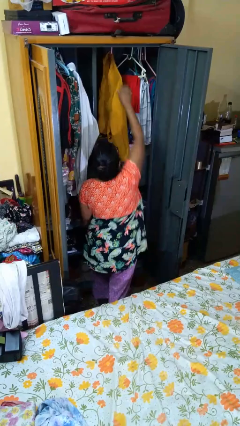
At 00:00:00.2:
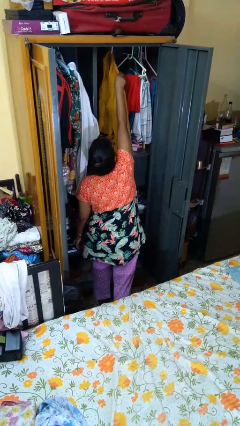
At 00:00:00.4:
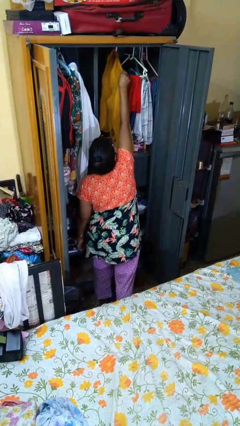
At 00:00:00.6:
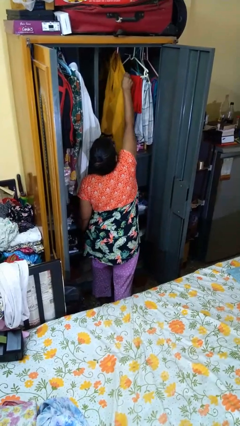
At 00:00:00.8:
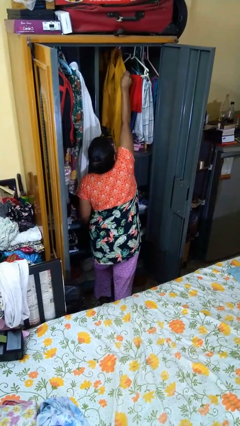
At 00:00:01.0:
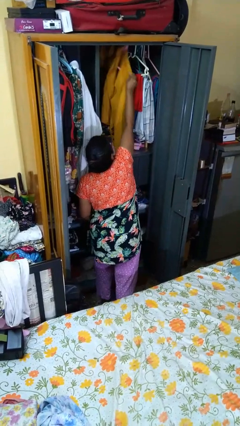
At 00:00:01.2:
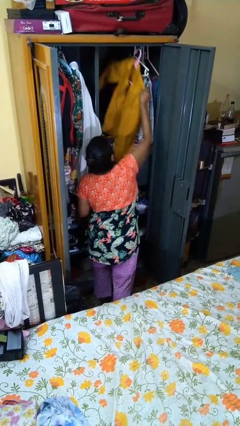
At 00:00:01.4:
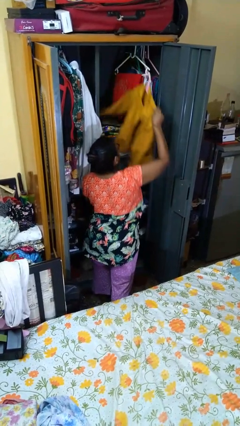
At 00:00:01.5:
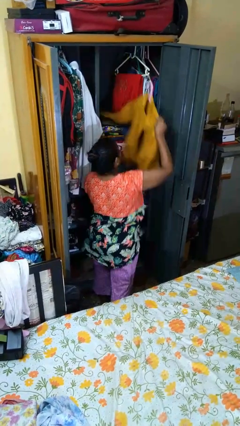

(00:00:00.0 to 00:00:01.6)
person takes clothes from closet

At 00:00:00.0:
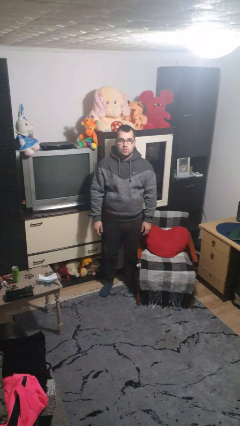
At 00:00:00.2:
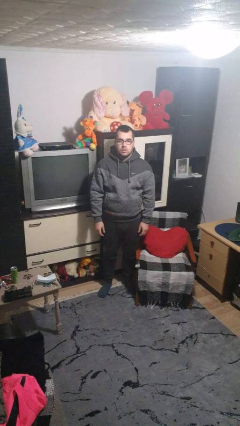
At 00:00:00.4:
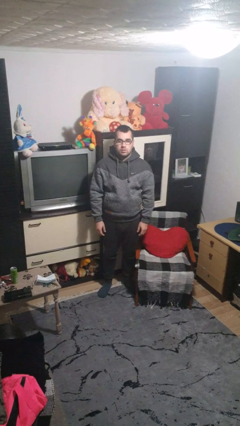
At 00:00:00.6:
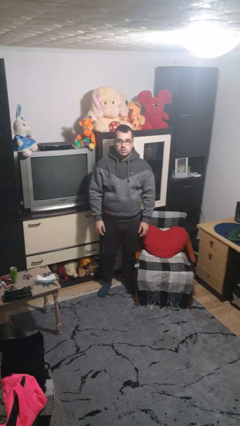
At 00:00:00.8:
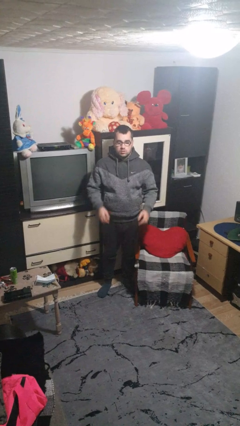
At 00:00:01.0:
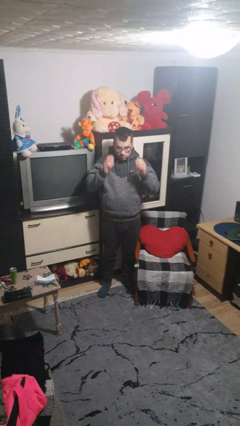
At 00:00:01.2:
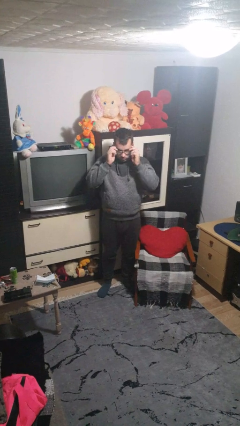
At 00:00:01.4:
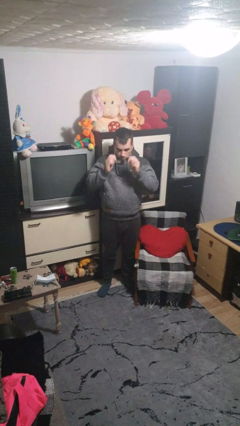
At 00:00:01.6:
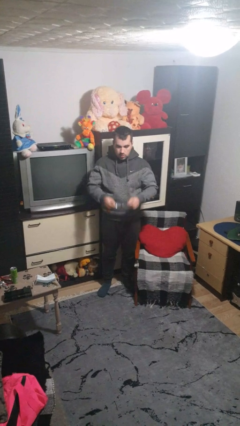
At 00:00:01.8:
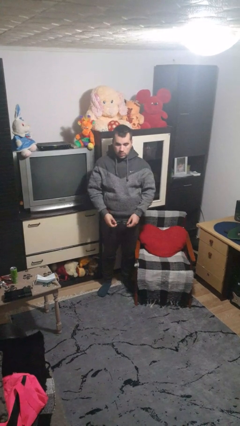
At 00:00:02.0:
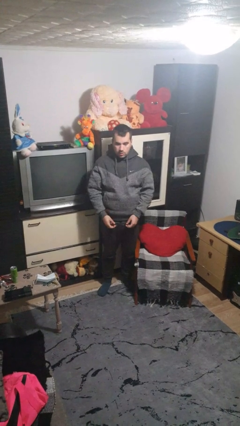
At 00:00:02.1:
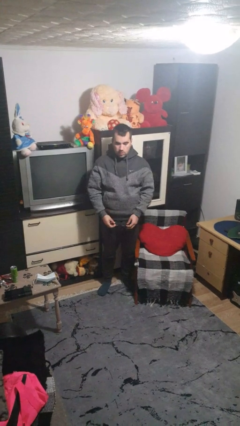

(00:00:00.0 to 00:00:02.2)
person takes off glasses

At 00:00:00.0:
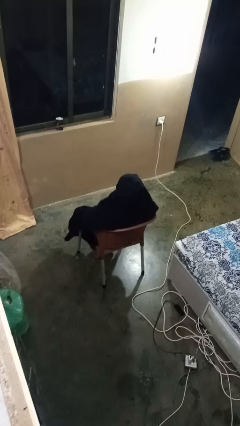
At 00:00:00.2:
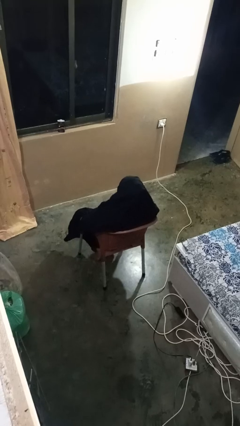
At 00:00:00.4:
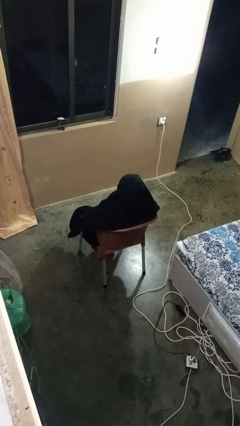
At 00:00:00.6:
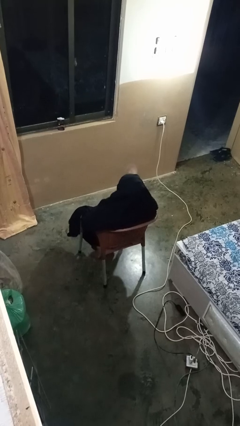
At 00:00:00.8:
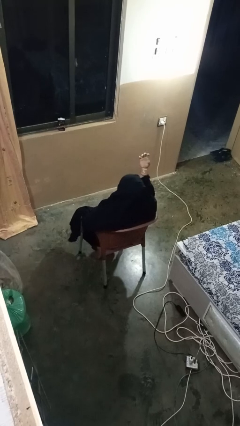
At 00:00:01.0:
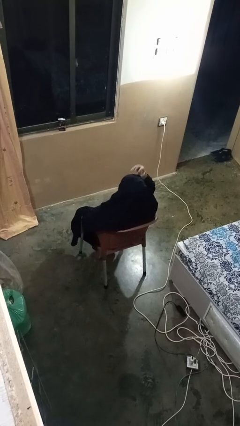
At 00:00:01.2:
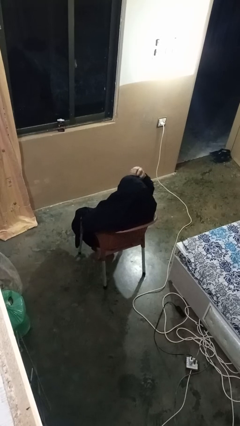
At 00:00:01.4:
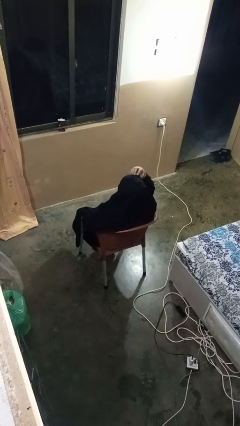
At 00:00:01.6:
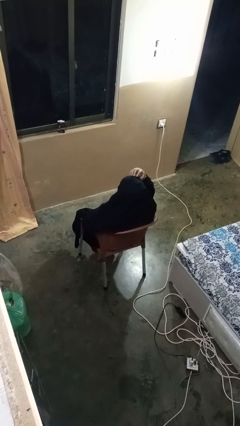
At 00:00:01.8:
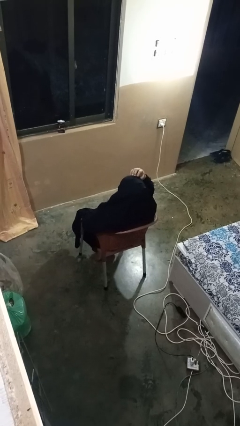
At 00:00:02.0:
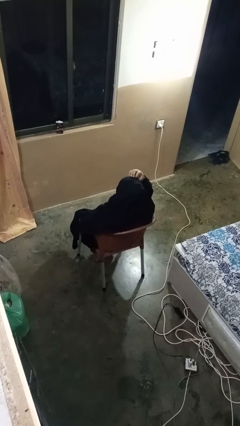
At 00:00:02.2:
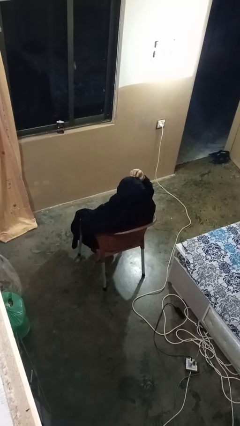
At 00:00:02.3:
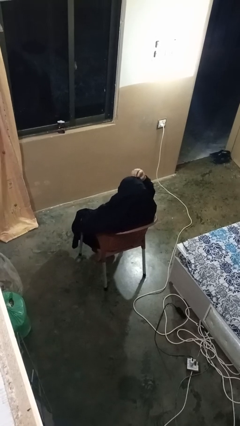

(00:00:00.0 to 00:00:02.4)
person scratches face

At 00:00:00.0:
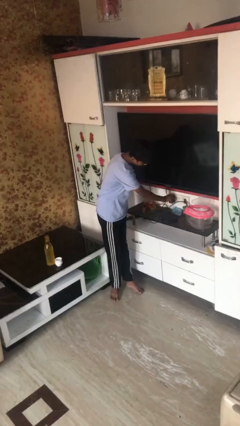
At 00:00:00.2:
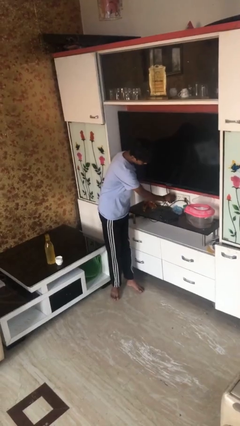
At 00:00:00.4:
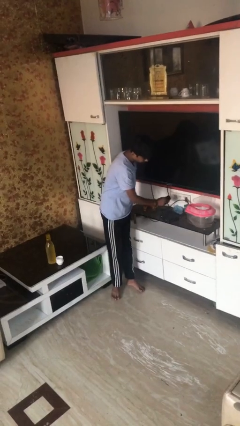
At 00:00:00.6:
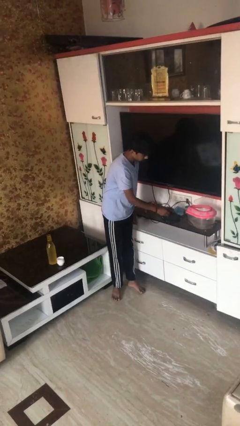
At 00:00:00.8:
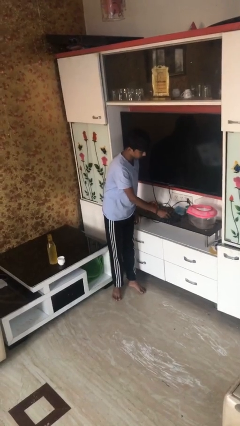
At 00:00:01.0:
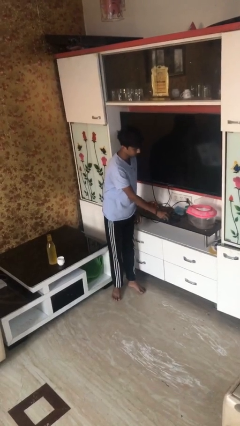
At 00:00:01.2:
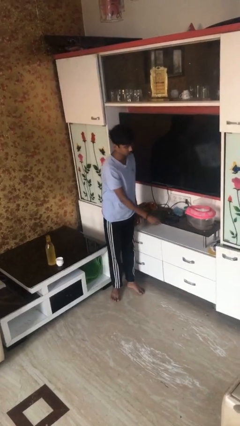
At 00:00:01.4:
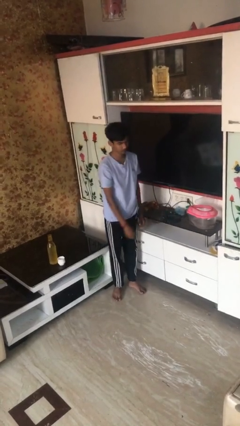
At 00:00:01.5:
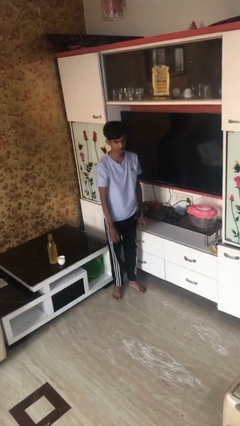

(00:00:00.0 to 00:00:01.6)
person unplugs from electrical socket

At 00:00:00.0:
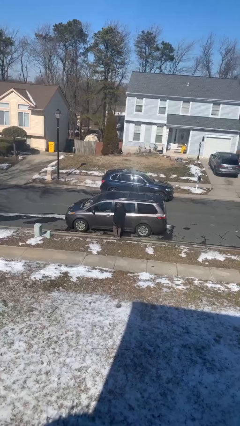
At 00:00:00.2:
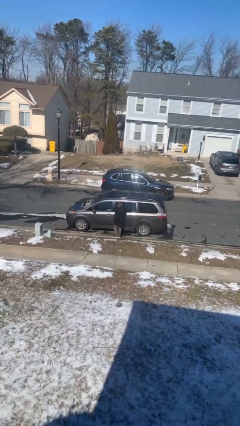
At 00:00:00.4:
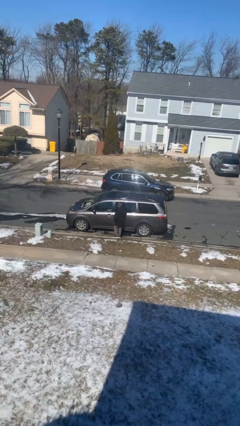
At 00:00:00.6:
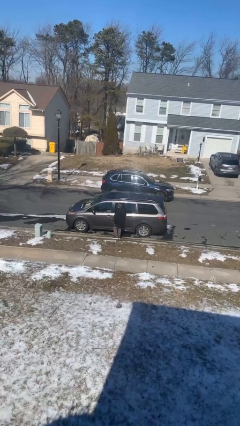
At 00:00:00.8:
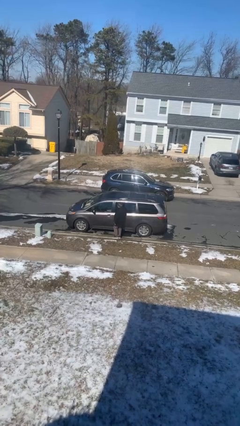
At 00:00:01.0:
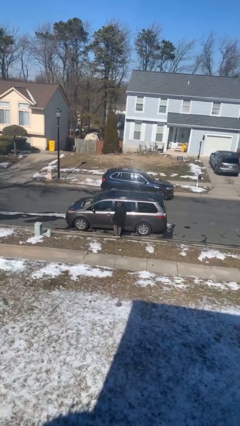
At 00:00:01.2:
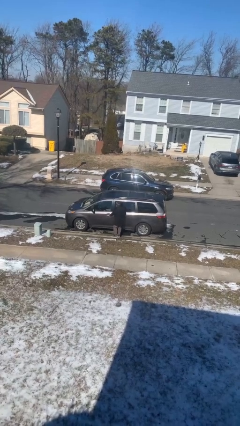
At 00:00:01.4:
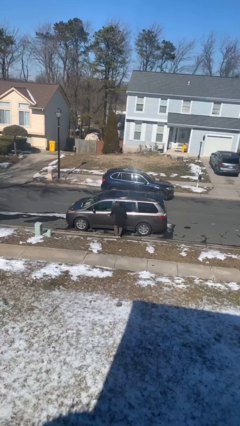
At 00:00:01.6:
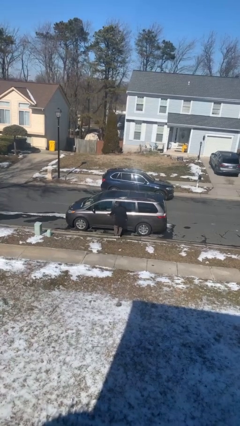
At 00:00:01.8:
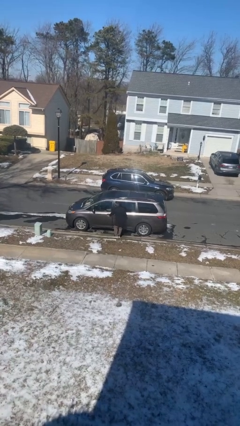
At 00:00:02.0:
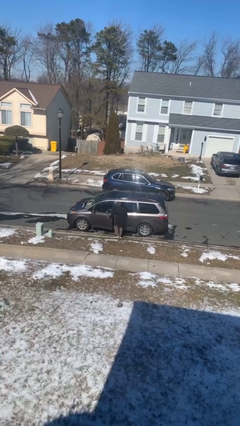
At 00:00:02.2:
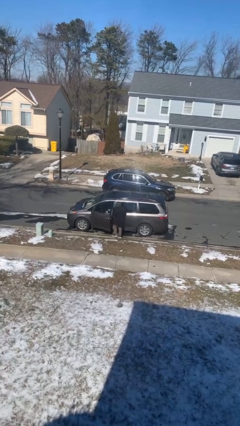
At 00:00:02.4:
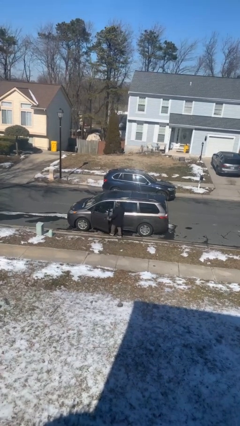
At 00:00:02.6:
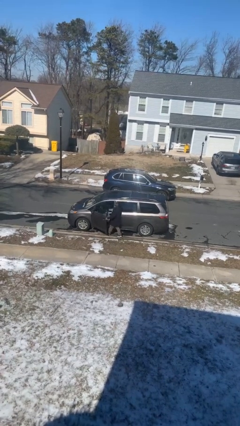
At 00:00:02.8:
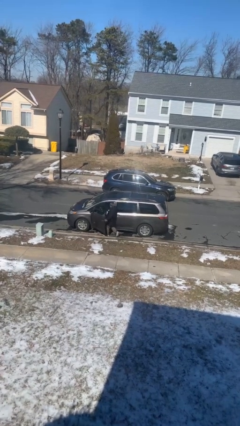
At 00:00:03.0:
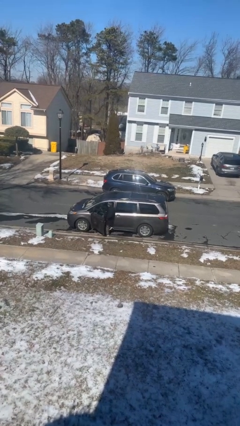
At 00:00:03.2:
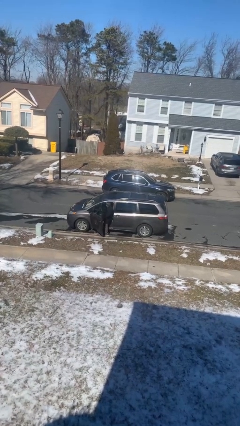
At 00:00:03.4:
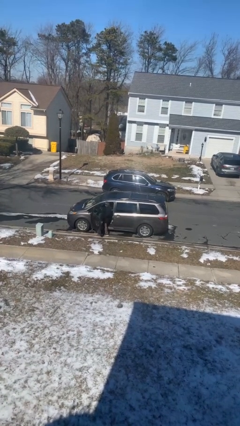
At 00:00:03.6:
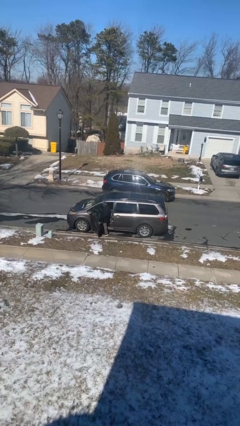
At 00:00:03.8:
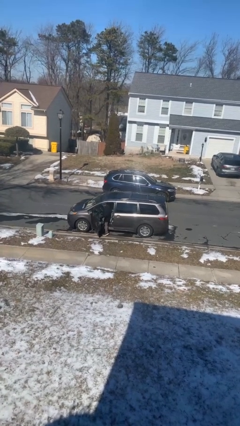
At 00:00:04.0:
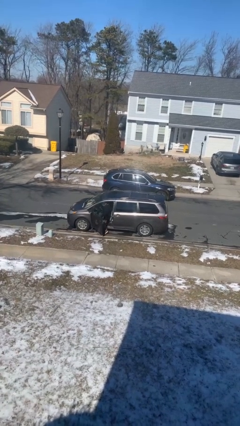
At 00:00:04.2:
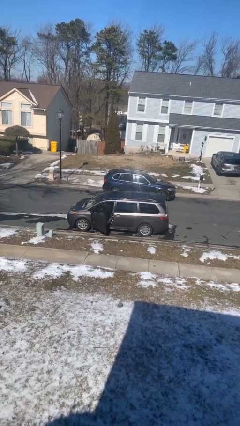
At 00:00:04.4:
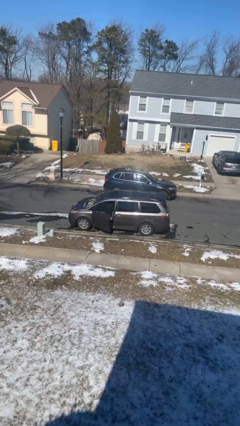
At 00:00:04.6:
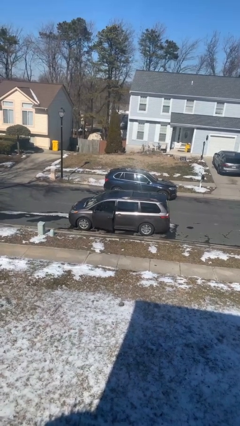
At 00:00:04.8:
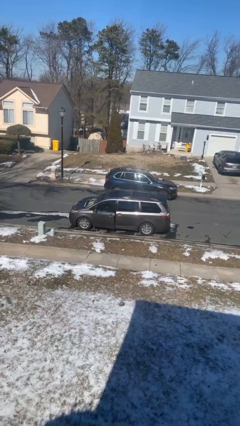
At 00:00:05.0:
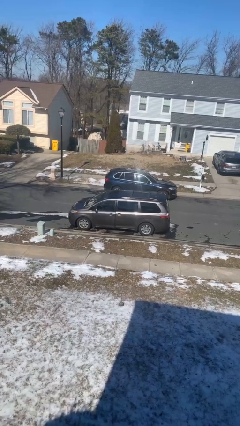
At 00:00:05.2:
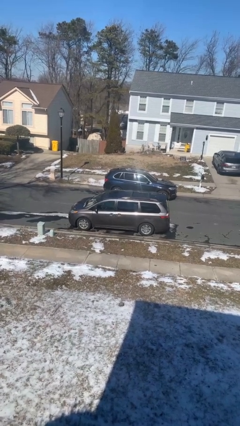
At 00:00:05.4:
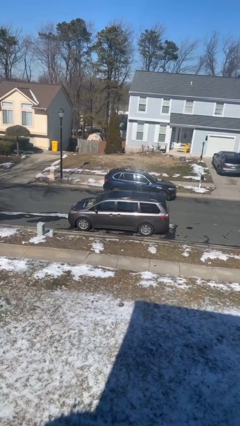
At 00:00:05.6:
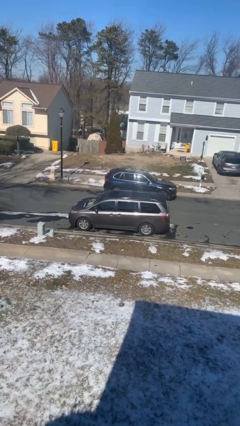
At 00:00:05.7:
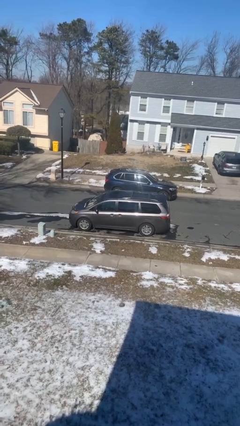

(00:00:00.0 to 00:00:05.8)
car picks up person

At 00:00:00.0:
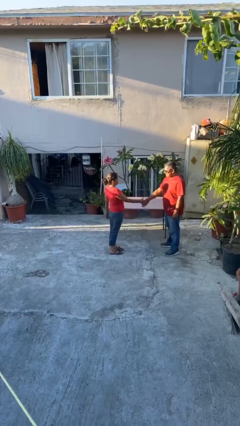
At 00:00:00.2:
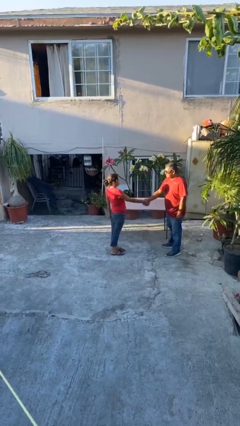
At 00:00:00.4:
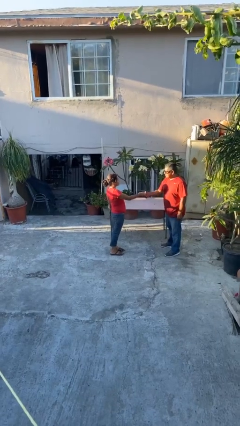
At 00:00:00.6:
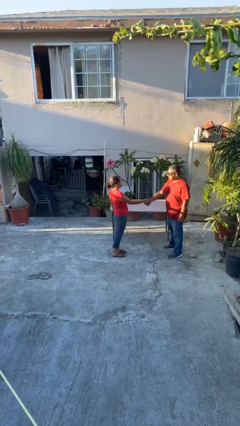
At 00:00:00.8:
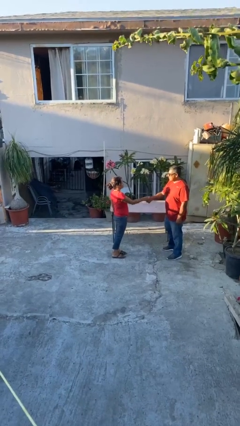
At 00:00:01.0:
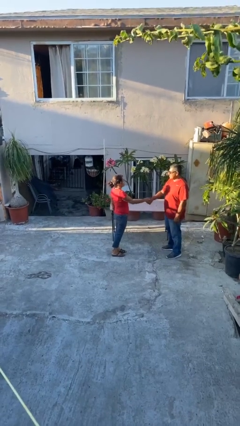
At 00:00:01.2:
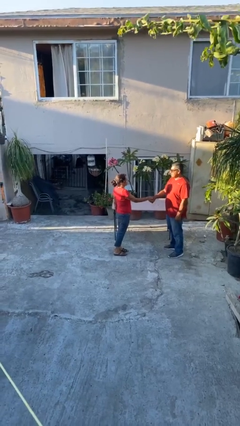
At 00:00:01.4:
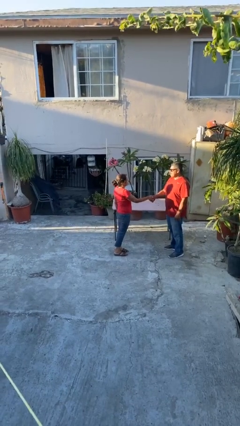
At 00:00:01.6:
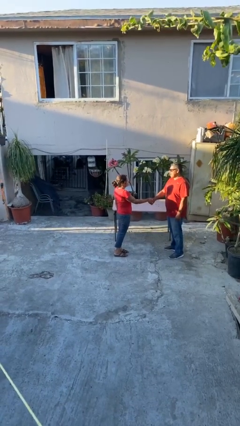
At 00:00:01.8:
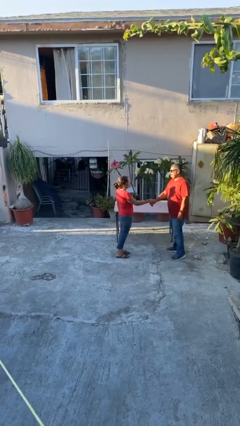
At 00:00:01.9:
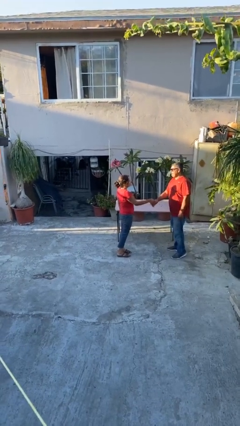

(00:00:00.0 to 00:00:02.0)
person shakes hand

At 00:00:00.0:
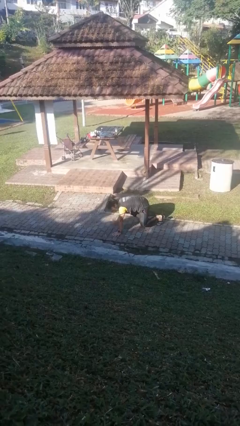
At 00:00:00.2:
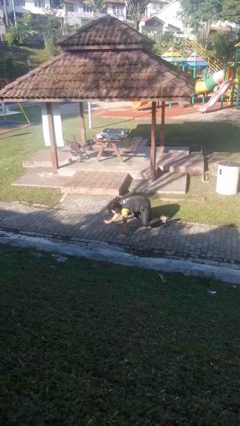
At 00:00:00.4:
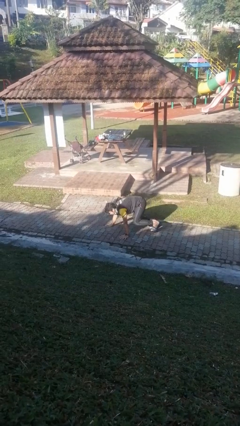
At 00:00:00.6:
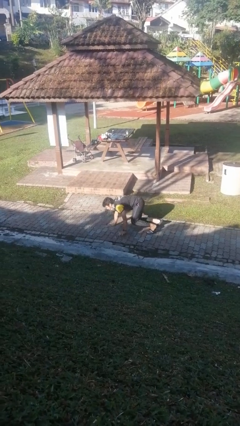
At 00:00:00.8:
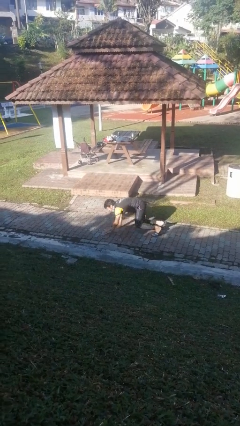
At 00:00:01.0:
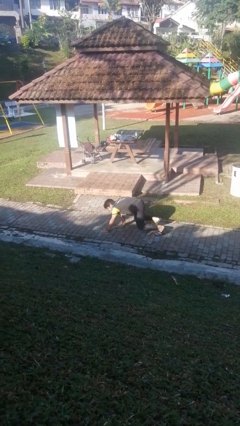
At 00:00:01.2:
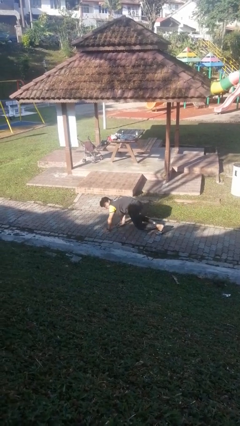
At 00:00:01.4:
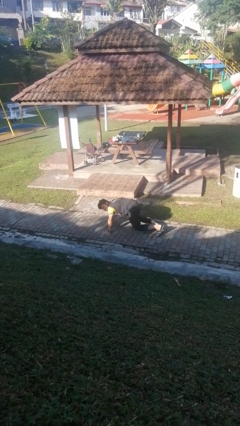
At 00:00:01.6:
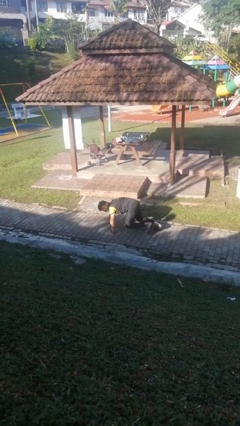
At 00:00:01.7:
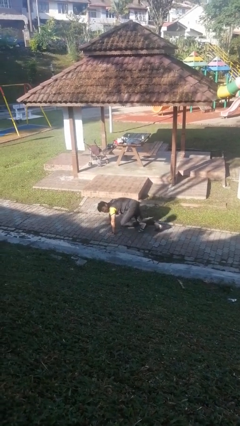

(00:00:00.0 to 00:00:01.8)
person crawls
